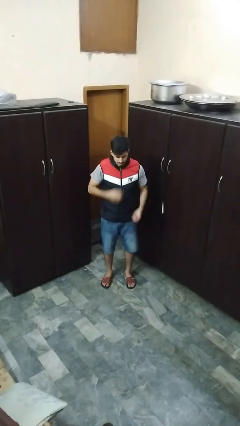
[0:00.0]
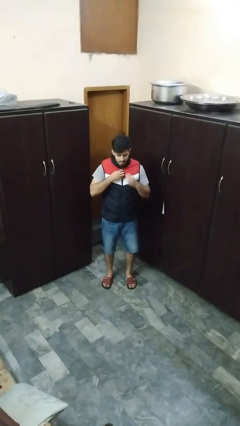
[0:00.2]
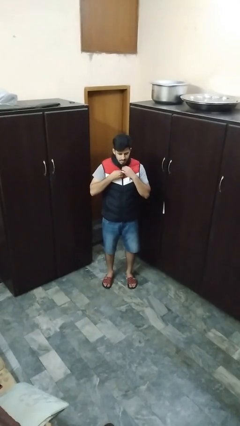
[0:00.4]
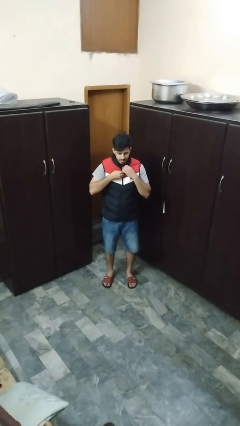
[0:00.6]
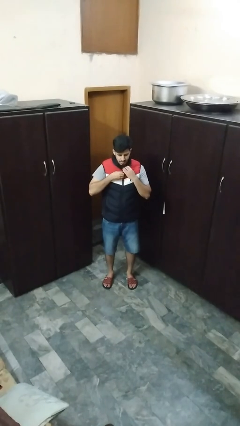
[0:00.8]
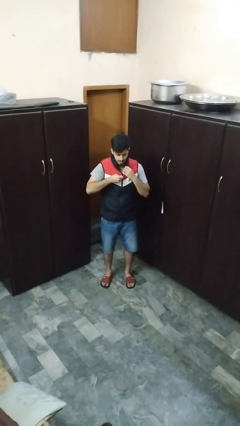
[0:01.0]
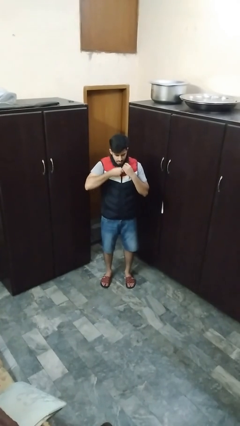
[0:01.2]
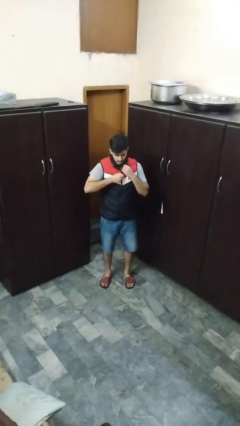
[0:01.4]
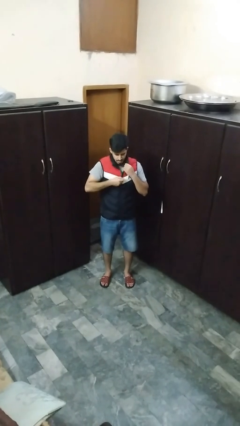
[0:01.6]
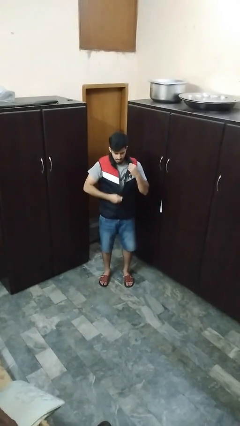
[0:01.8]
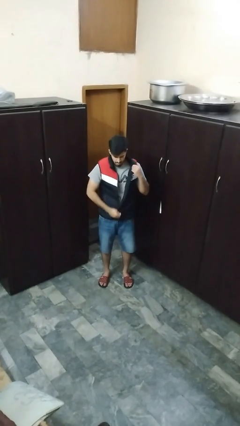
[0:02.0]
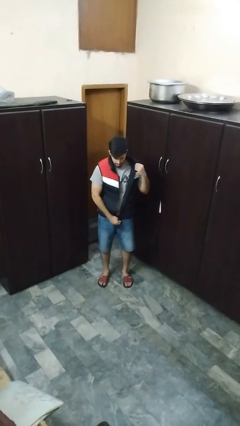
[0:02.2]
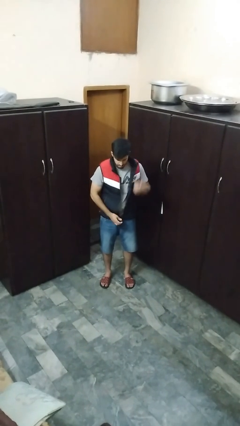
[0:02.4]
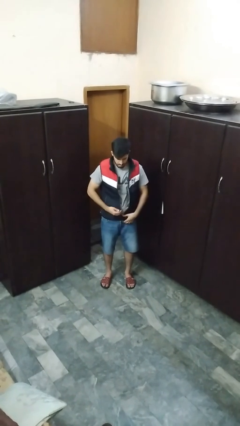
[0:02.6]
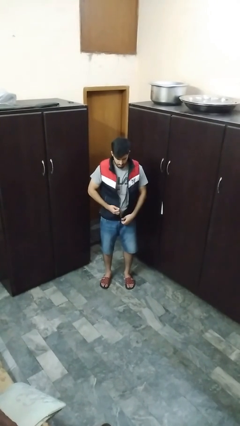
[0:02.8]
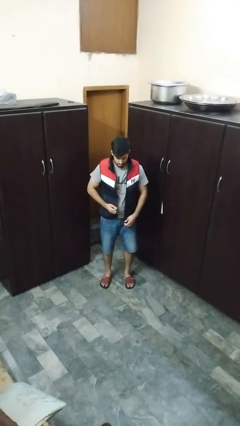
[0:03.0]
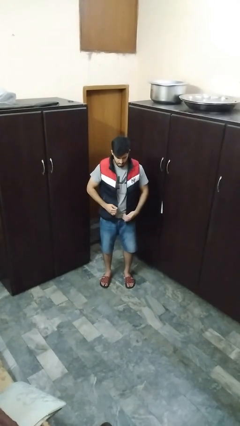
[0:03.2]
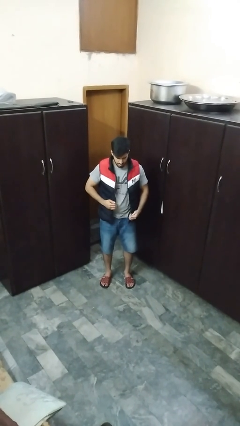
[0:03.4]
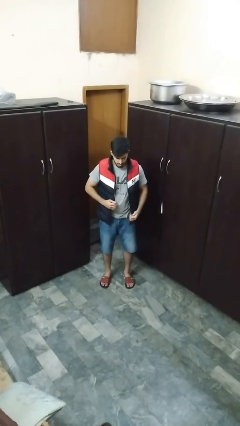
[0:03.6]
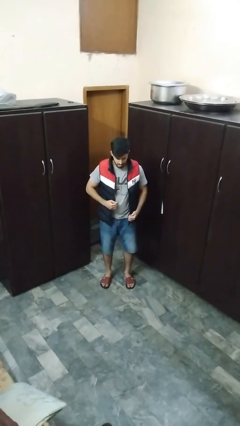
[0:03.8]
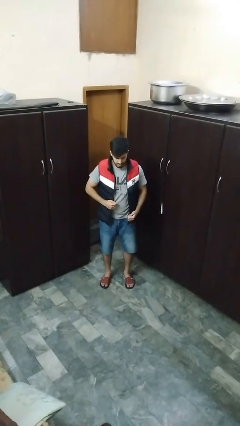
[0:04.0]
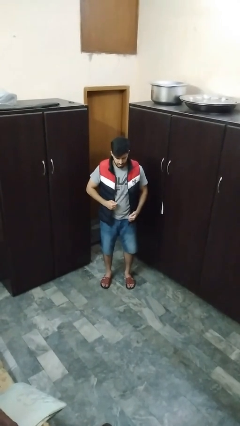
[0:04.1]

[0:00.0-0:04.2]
person unzips jacket

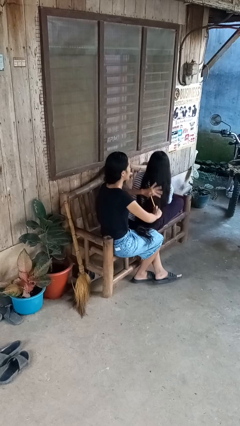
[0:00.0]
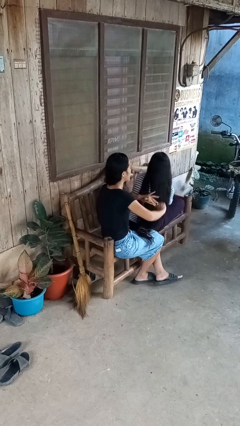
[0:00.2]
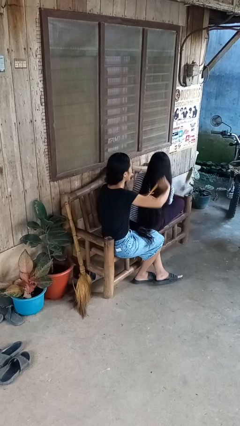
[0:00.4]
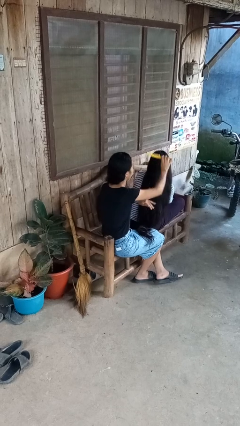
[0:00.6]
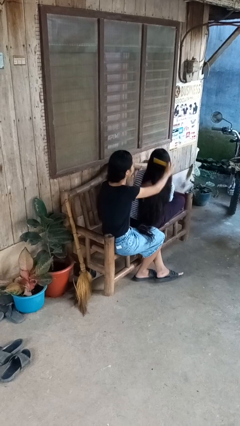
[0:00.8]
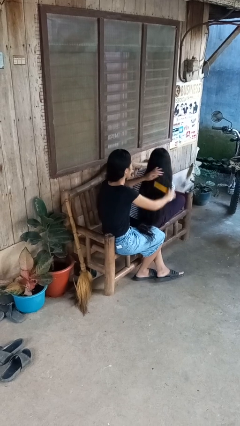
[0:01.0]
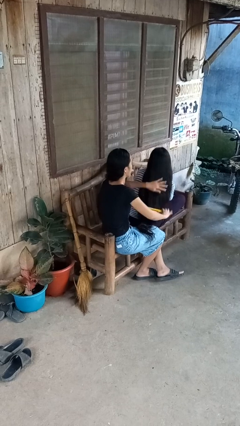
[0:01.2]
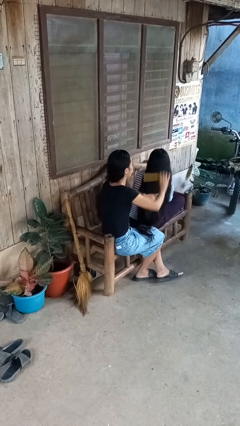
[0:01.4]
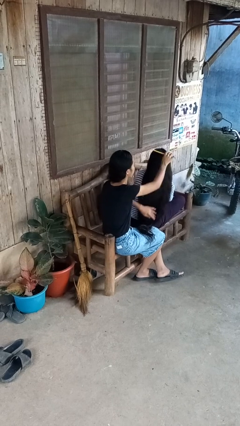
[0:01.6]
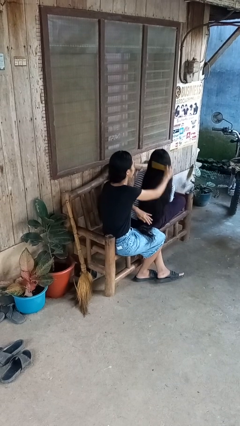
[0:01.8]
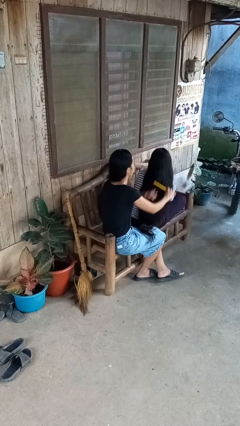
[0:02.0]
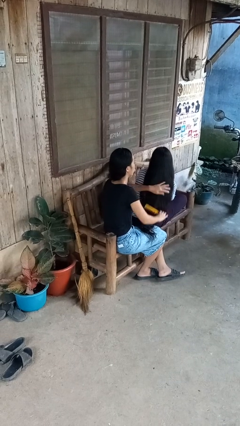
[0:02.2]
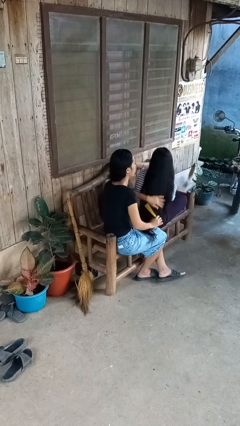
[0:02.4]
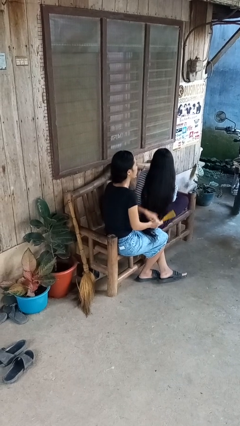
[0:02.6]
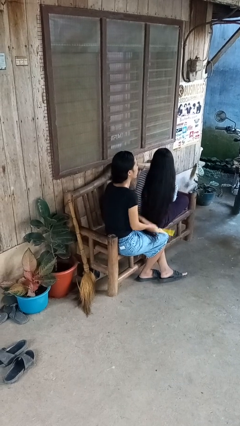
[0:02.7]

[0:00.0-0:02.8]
person brushes hair of person

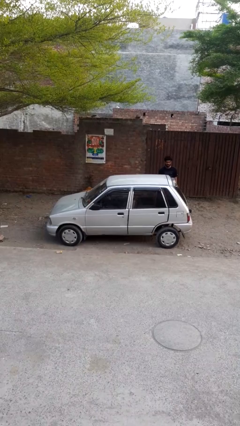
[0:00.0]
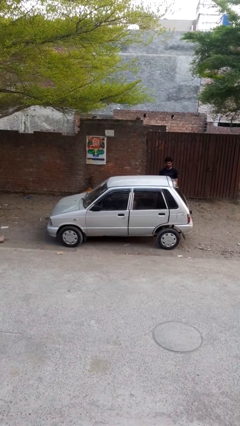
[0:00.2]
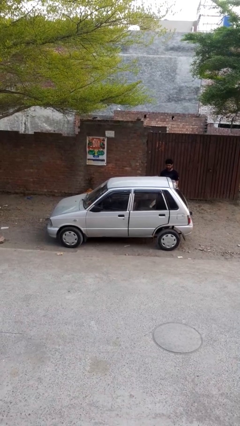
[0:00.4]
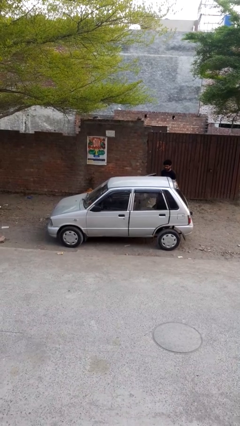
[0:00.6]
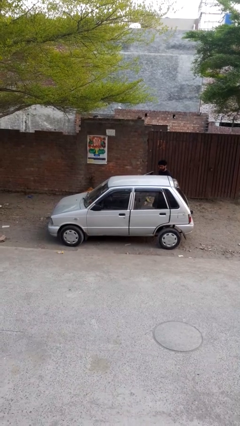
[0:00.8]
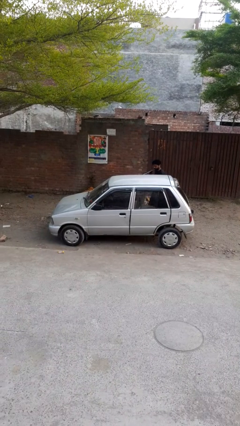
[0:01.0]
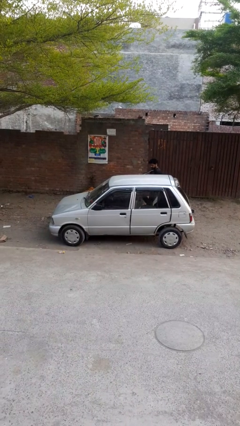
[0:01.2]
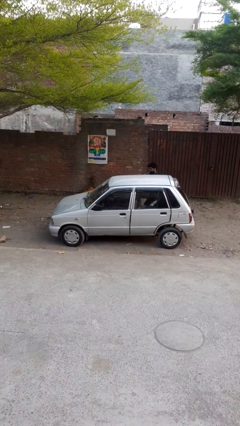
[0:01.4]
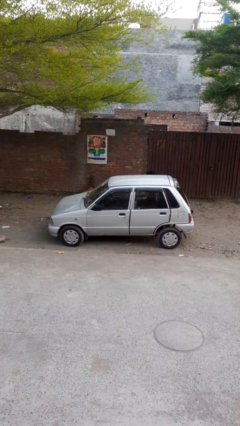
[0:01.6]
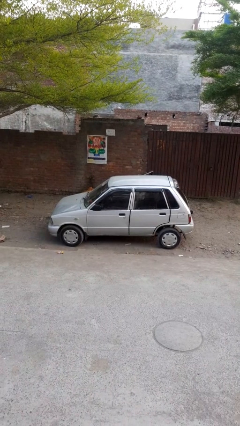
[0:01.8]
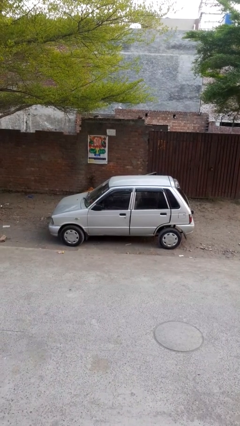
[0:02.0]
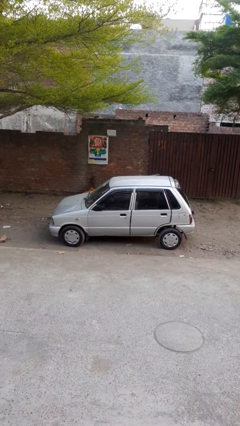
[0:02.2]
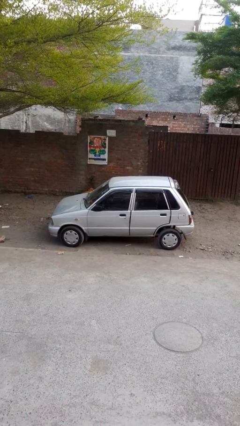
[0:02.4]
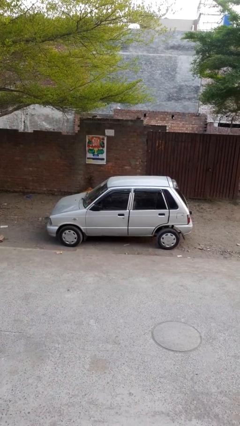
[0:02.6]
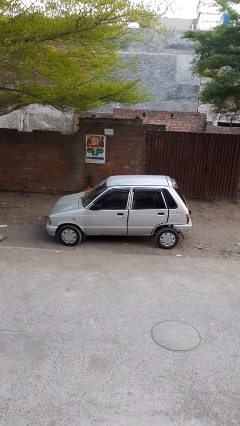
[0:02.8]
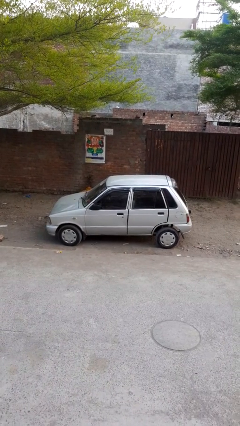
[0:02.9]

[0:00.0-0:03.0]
car picks up person

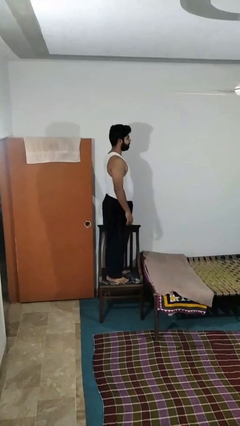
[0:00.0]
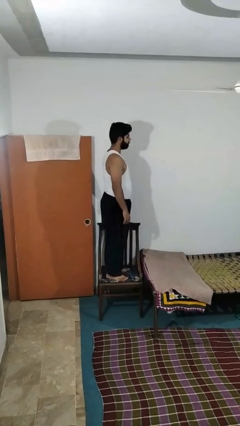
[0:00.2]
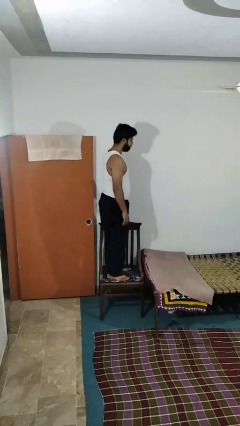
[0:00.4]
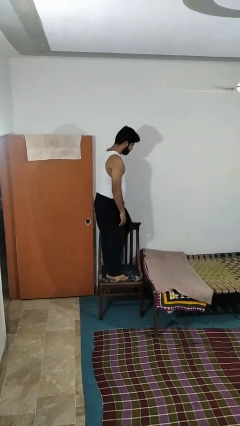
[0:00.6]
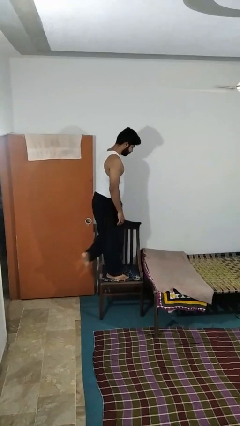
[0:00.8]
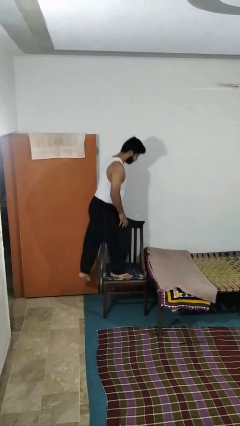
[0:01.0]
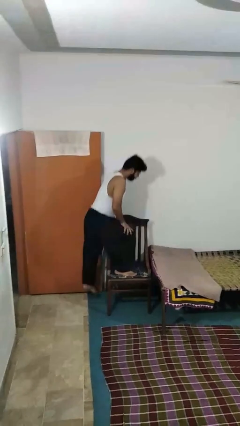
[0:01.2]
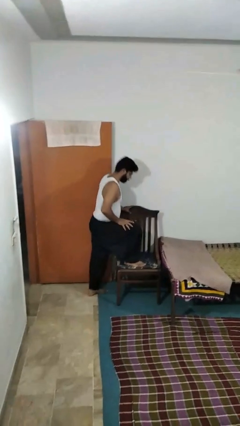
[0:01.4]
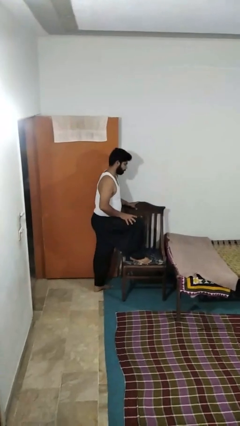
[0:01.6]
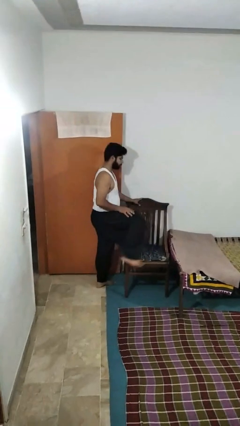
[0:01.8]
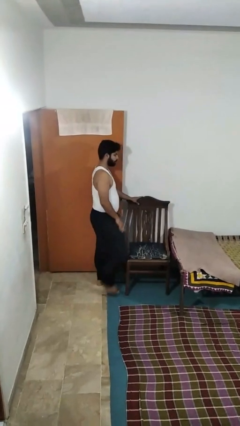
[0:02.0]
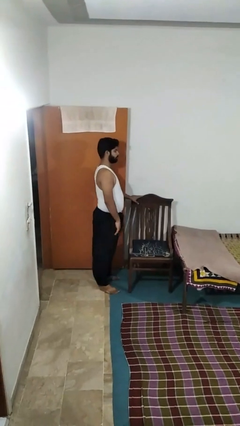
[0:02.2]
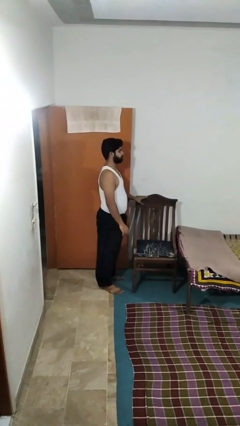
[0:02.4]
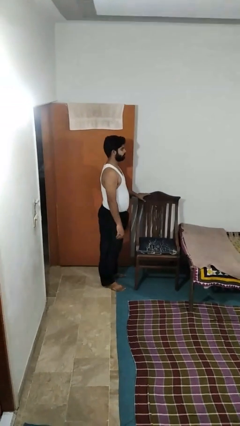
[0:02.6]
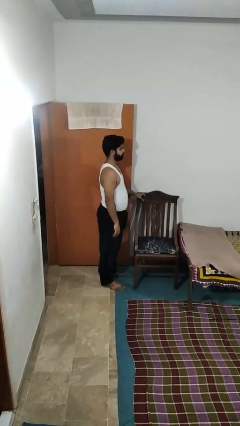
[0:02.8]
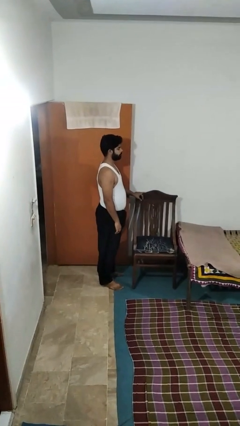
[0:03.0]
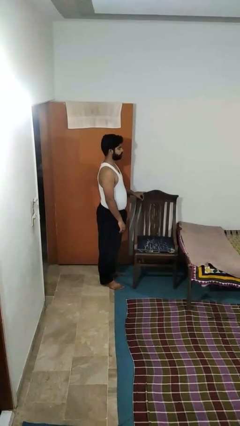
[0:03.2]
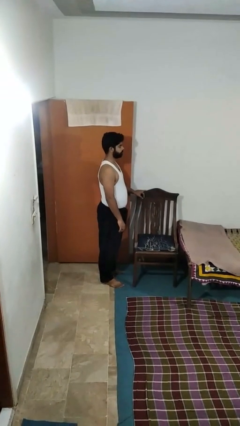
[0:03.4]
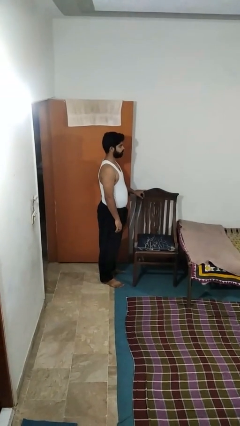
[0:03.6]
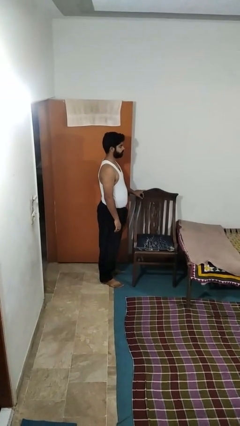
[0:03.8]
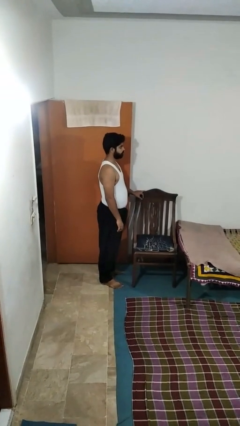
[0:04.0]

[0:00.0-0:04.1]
person climbs off chair

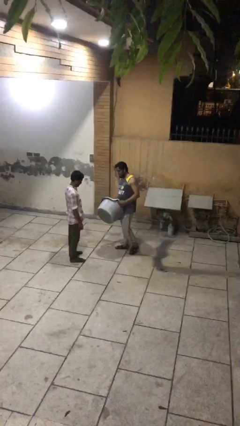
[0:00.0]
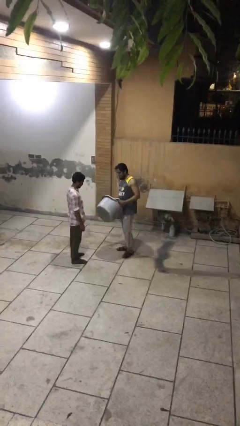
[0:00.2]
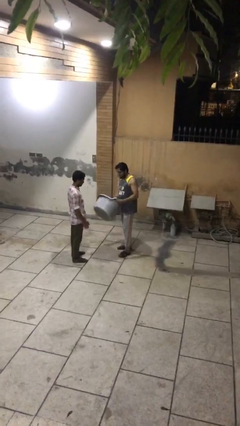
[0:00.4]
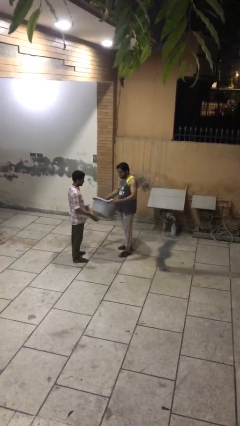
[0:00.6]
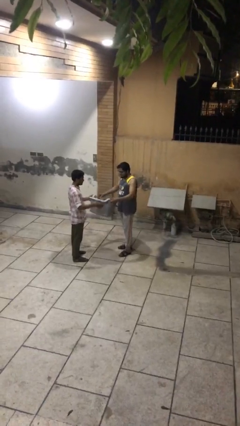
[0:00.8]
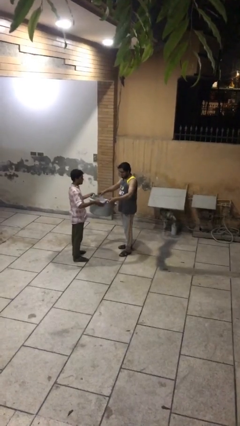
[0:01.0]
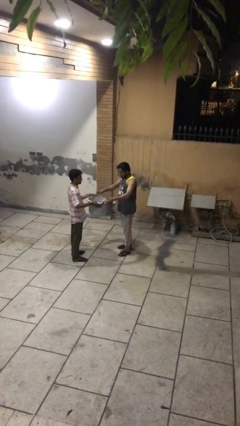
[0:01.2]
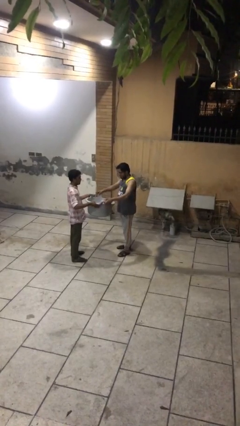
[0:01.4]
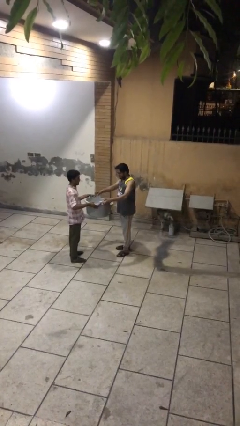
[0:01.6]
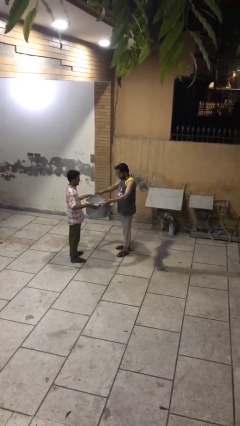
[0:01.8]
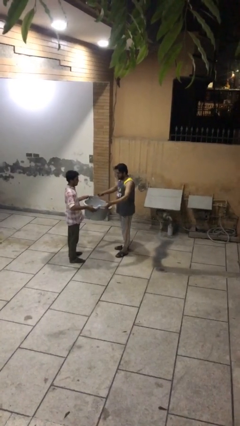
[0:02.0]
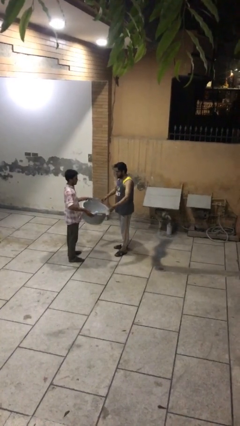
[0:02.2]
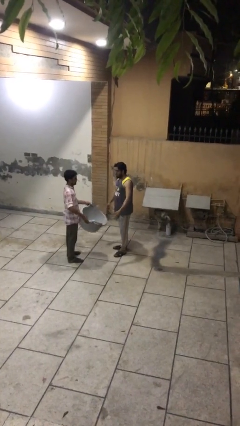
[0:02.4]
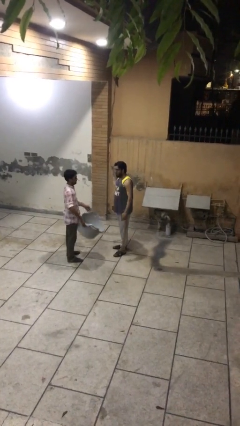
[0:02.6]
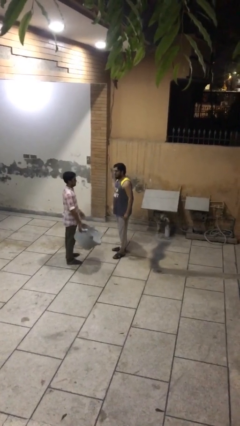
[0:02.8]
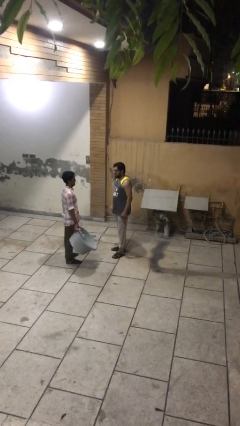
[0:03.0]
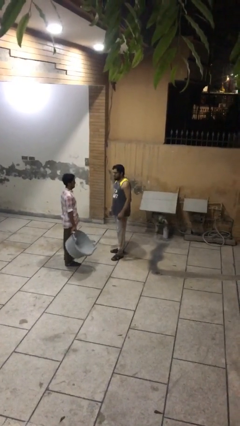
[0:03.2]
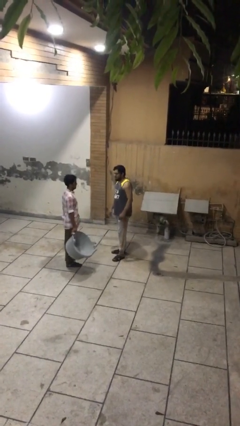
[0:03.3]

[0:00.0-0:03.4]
person transfers object to person
